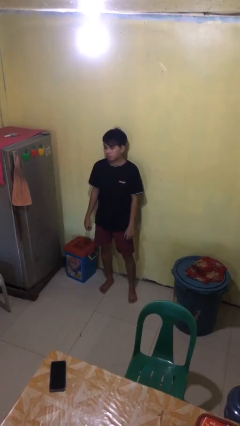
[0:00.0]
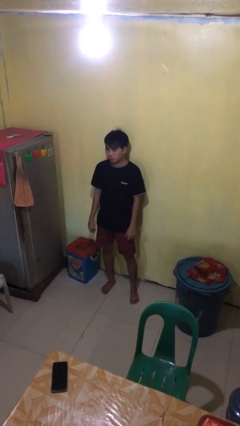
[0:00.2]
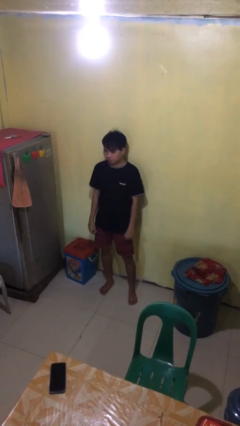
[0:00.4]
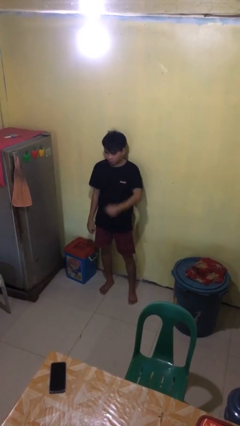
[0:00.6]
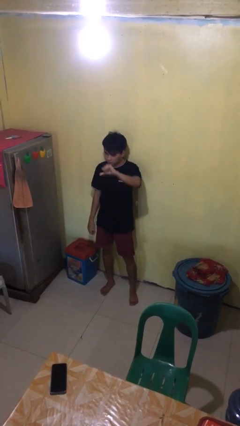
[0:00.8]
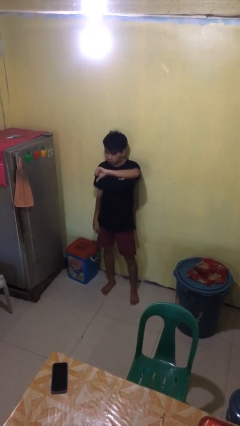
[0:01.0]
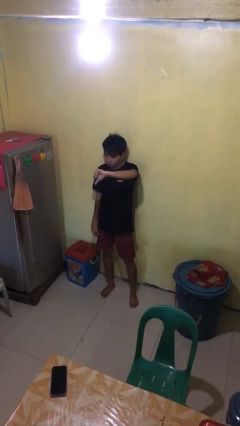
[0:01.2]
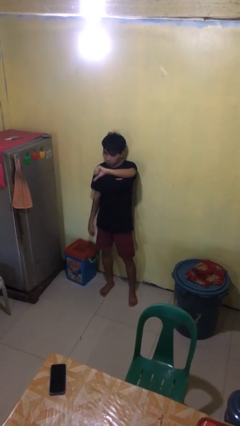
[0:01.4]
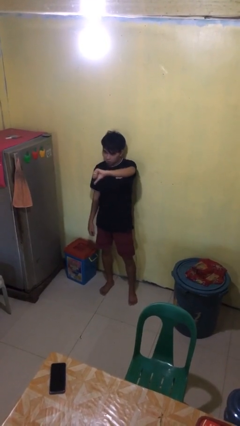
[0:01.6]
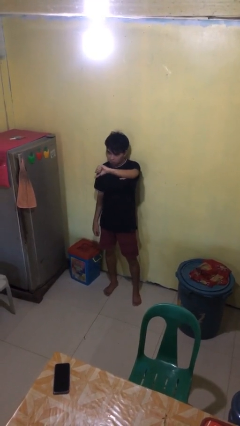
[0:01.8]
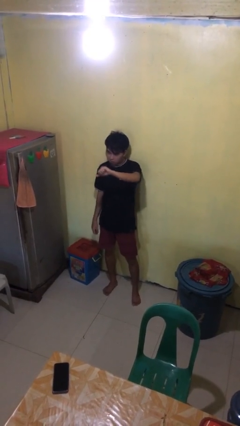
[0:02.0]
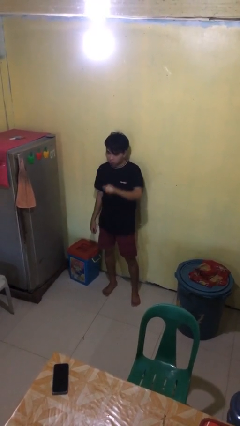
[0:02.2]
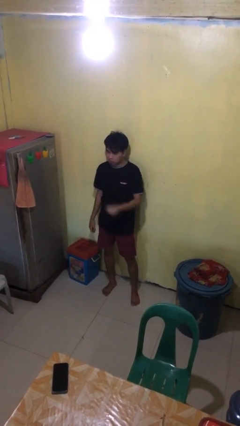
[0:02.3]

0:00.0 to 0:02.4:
person gestures thumbs down

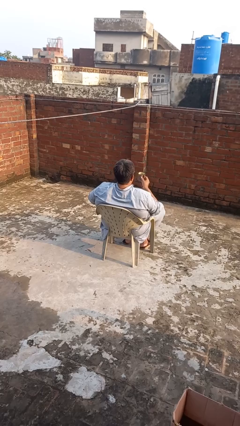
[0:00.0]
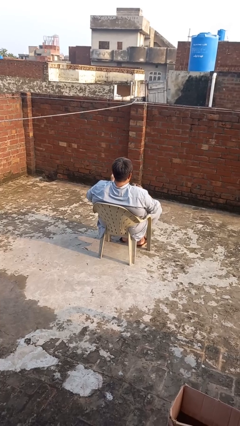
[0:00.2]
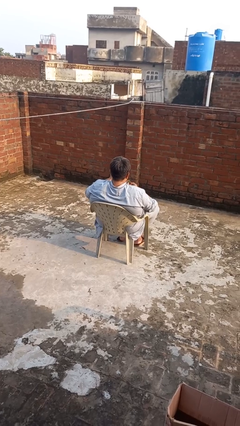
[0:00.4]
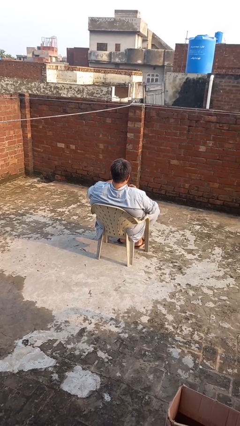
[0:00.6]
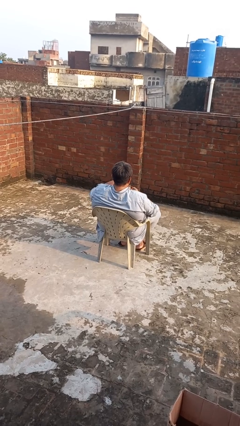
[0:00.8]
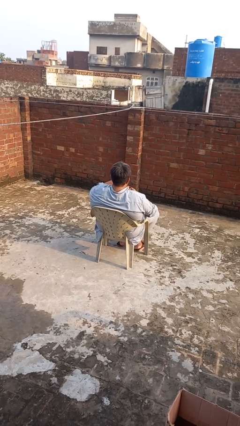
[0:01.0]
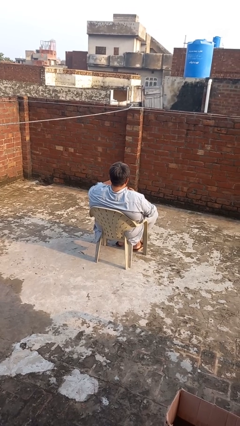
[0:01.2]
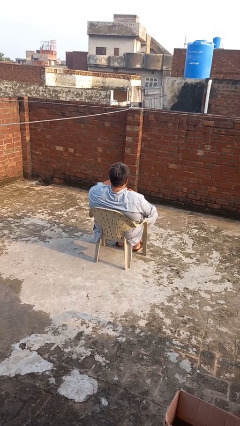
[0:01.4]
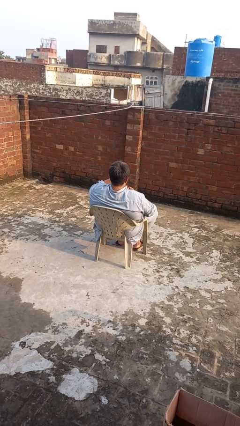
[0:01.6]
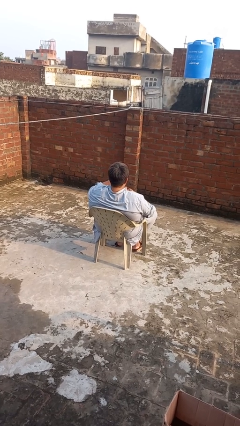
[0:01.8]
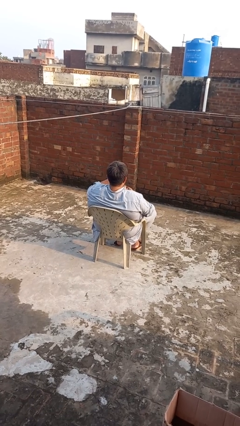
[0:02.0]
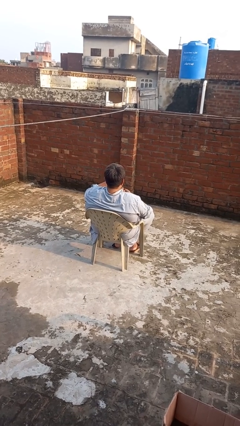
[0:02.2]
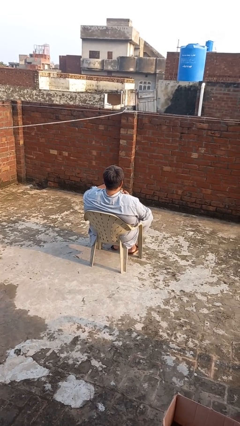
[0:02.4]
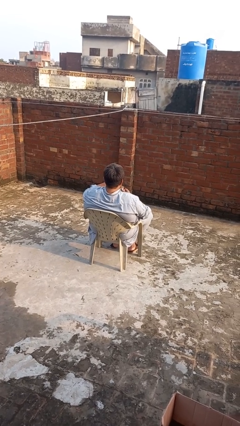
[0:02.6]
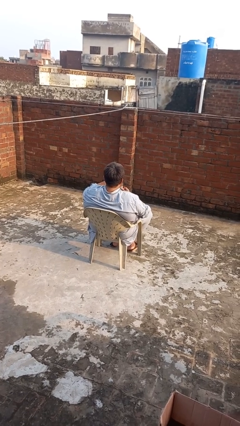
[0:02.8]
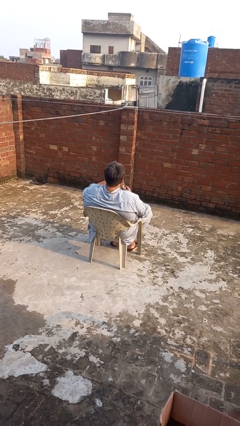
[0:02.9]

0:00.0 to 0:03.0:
person stirs mug

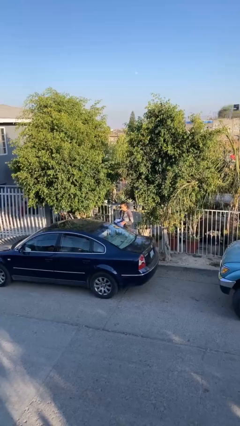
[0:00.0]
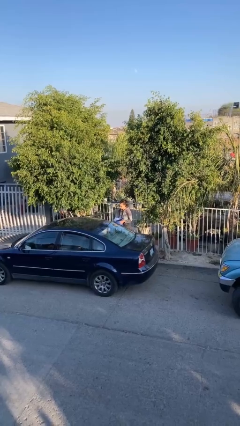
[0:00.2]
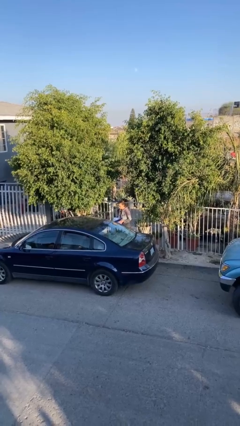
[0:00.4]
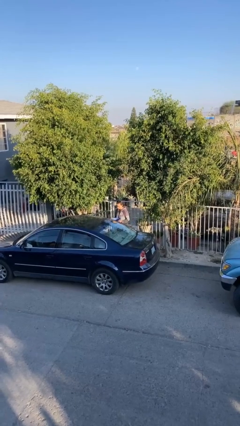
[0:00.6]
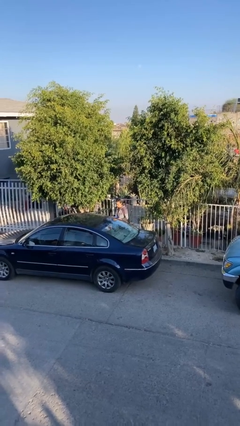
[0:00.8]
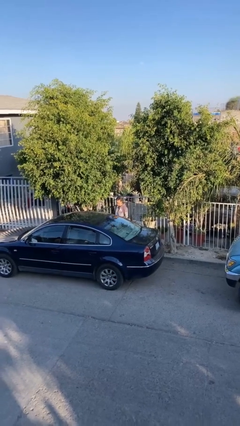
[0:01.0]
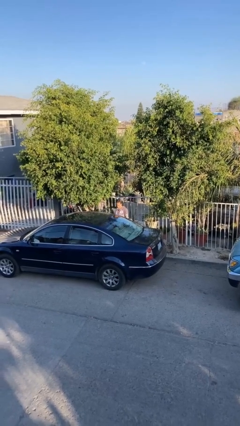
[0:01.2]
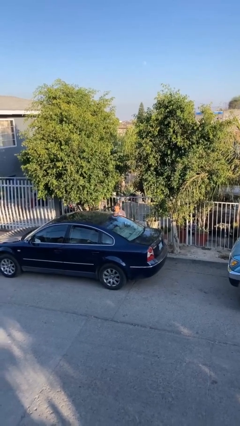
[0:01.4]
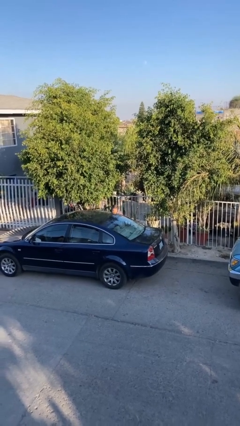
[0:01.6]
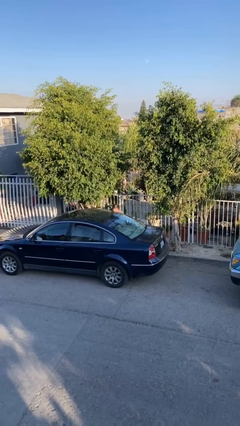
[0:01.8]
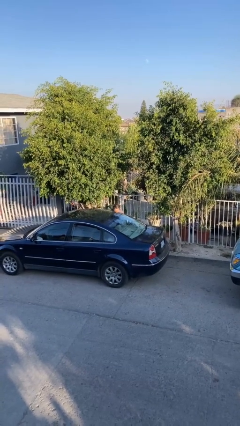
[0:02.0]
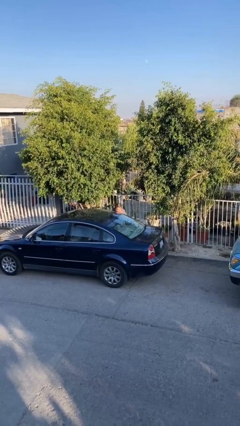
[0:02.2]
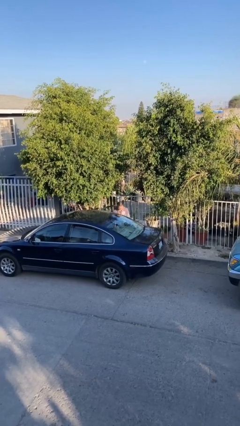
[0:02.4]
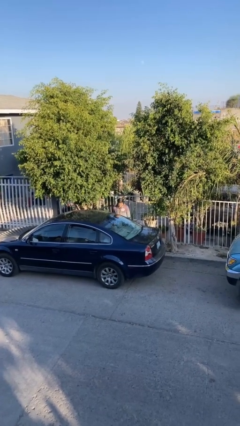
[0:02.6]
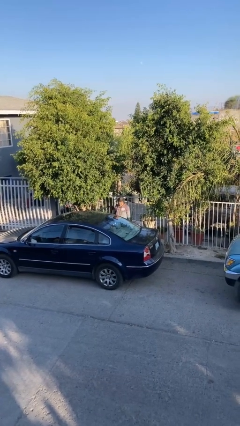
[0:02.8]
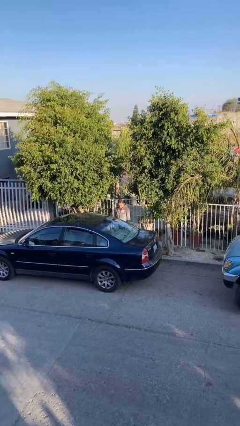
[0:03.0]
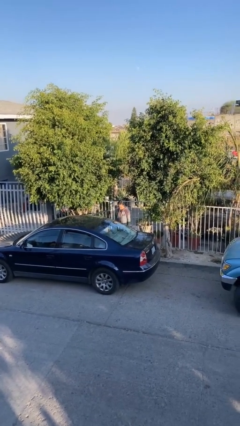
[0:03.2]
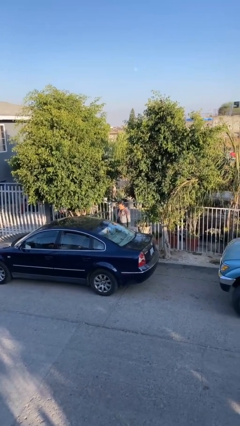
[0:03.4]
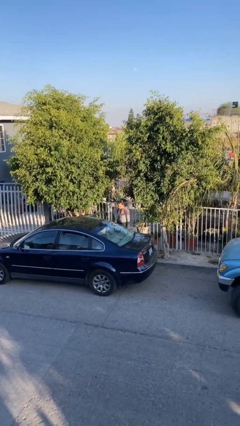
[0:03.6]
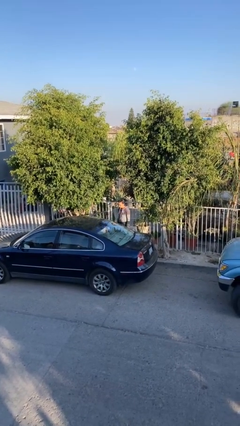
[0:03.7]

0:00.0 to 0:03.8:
person loads car

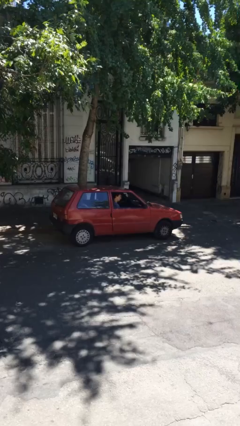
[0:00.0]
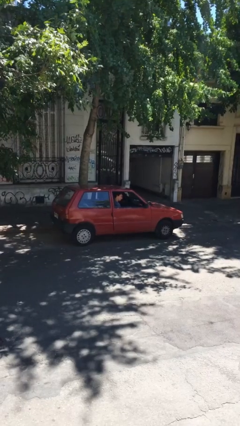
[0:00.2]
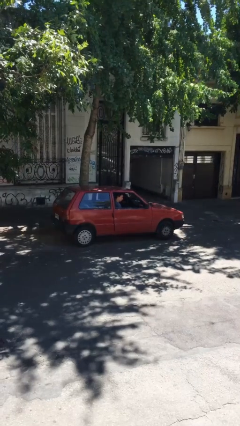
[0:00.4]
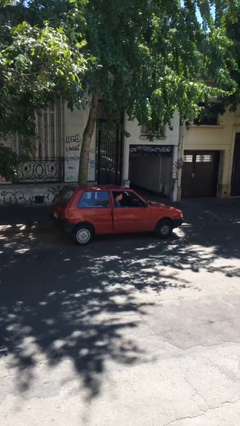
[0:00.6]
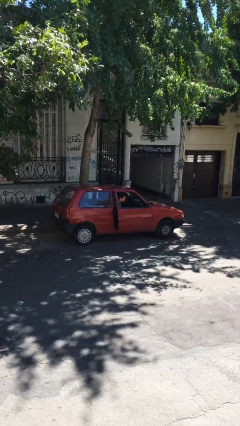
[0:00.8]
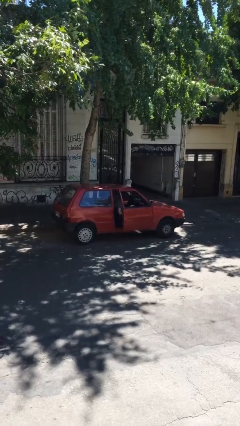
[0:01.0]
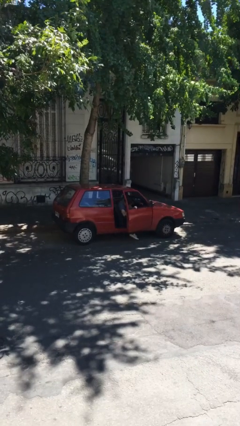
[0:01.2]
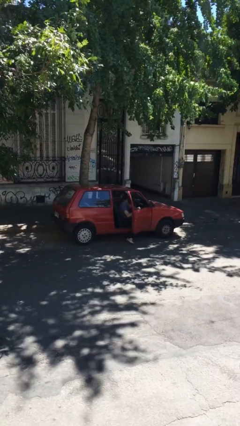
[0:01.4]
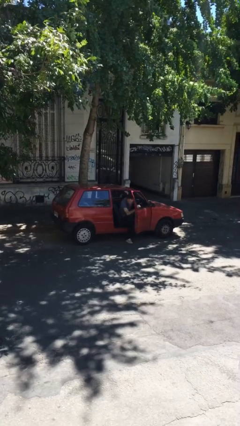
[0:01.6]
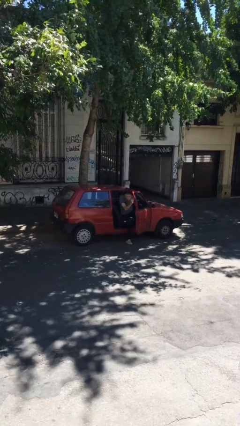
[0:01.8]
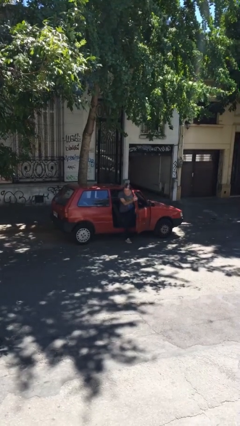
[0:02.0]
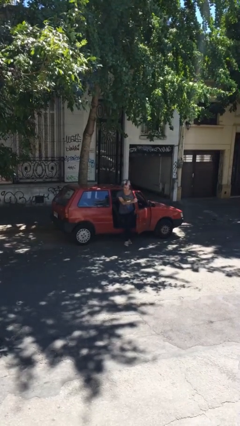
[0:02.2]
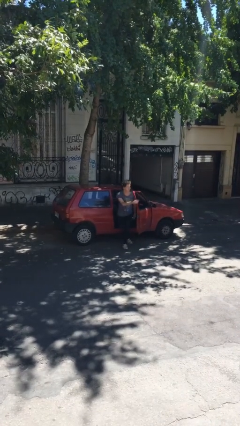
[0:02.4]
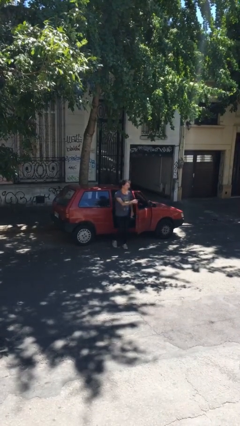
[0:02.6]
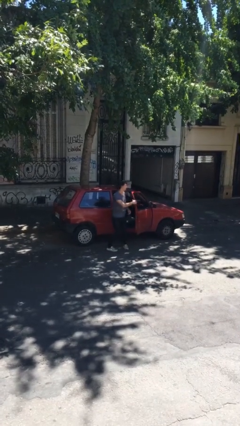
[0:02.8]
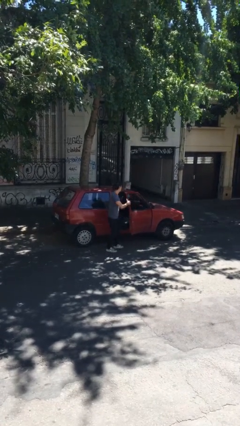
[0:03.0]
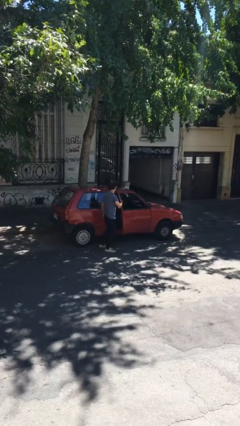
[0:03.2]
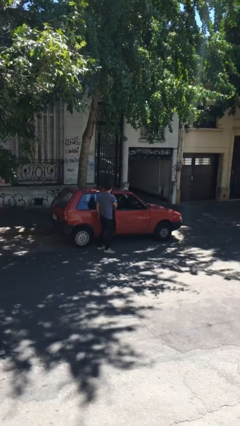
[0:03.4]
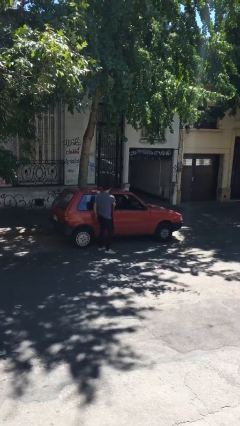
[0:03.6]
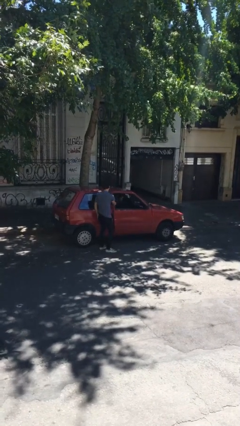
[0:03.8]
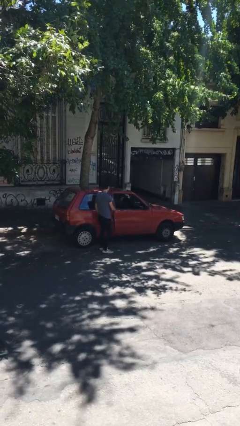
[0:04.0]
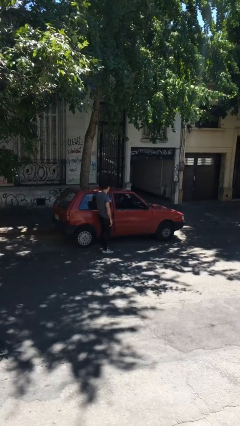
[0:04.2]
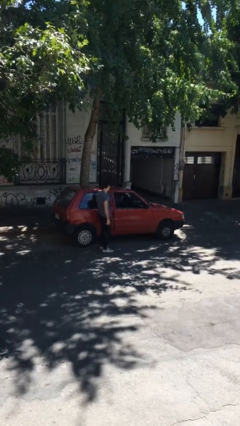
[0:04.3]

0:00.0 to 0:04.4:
car drops off person

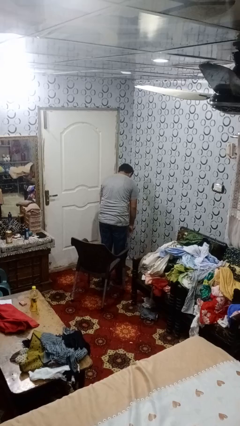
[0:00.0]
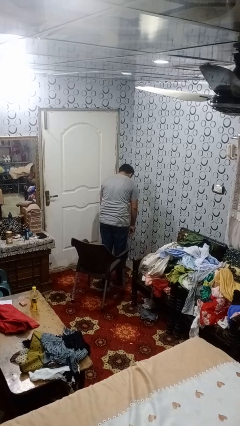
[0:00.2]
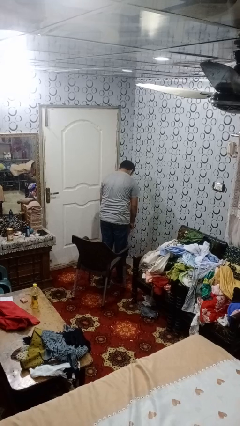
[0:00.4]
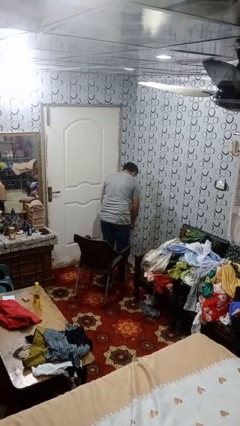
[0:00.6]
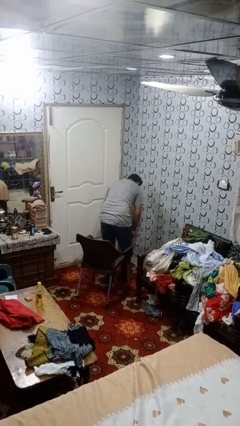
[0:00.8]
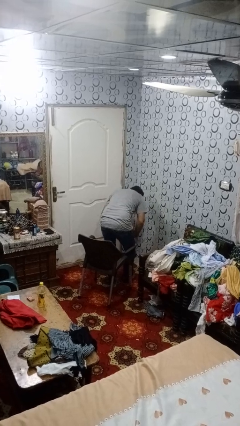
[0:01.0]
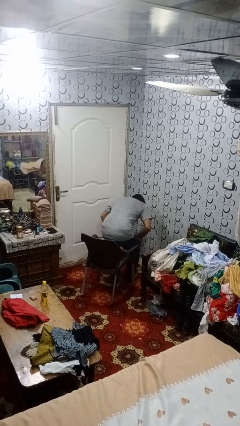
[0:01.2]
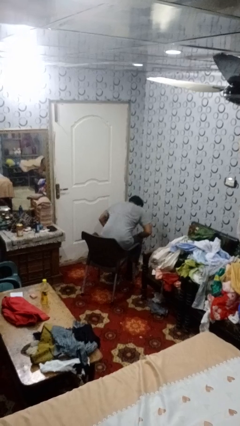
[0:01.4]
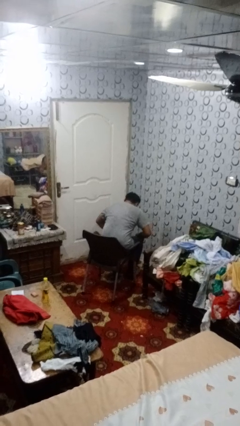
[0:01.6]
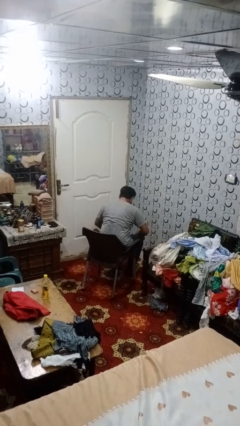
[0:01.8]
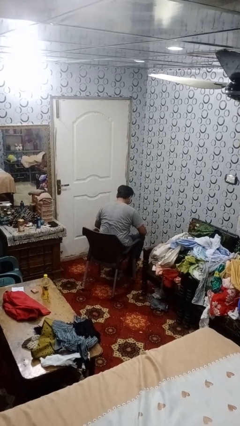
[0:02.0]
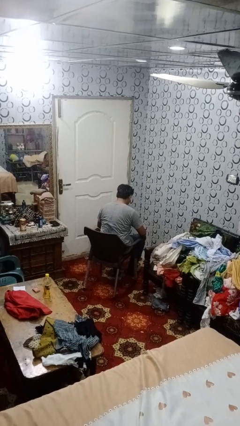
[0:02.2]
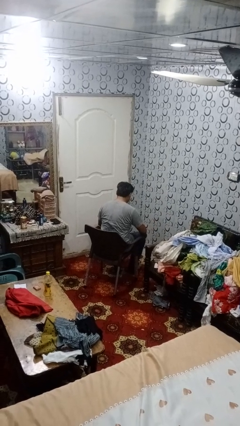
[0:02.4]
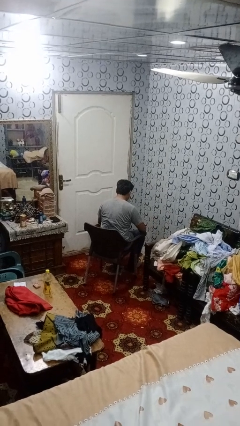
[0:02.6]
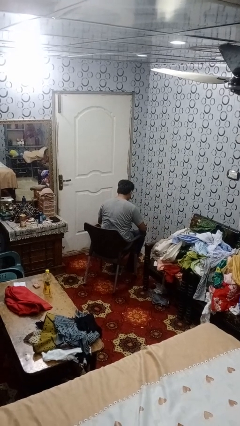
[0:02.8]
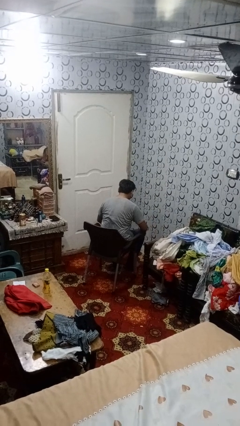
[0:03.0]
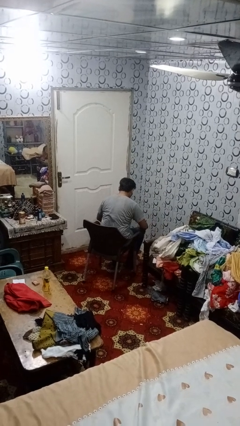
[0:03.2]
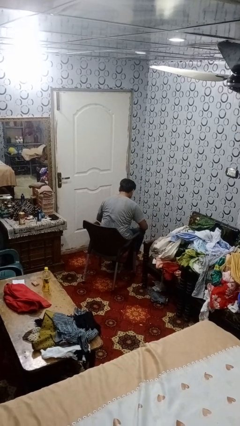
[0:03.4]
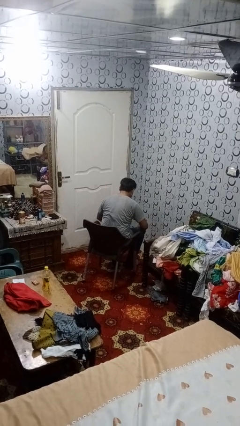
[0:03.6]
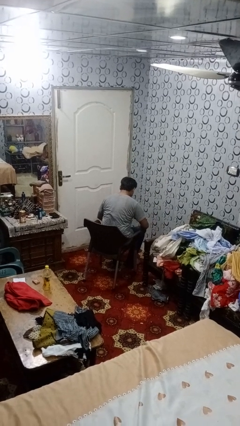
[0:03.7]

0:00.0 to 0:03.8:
person sits down

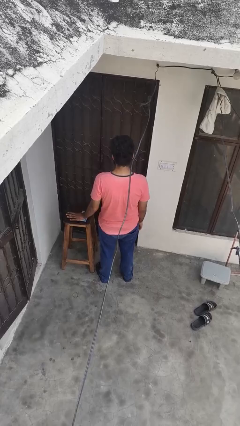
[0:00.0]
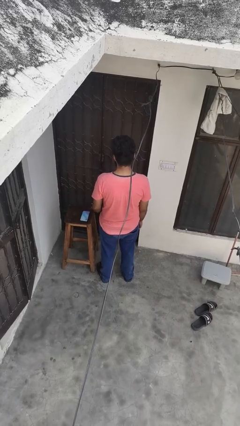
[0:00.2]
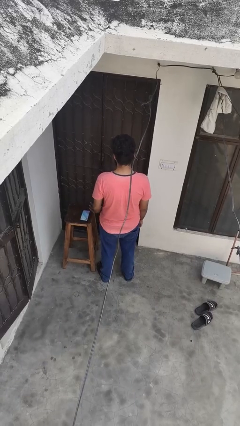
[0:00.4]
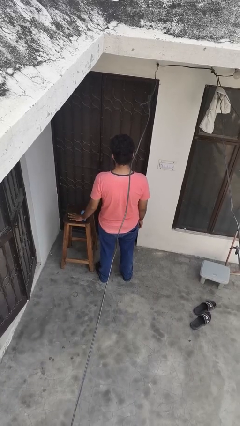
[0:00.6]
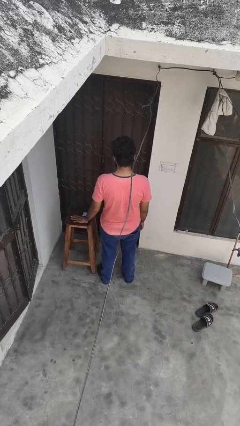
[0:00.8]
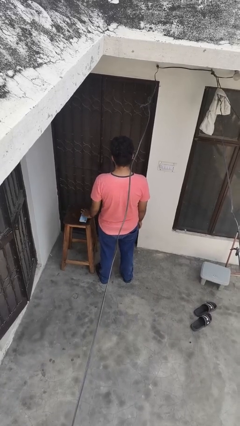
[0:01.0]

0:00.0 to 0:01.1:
person waves hand over object
